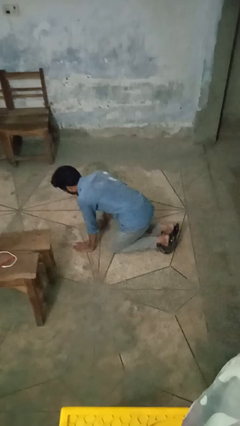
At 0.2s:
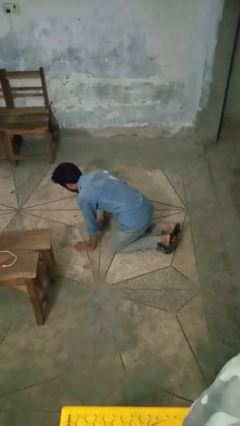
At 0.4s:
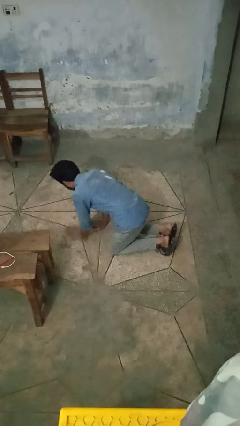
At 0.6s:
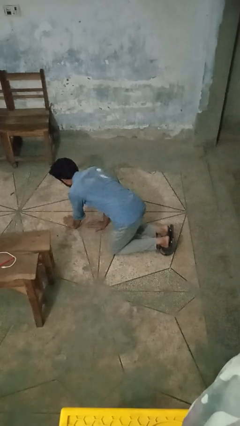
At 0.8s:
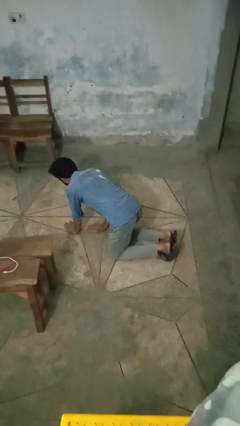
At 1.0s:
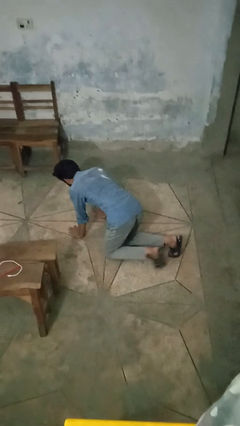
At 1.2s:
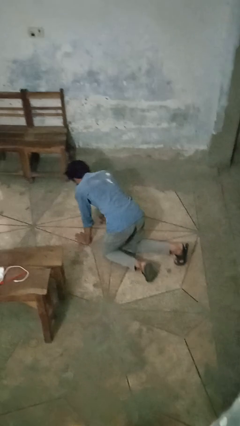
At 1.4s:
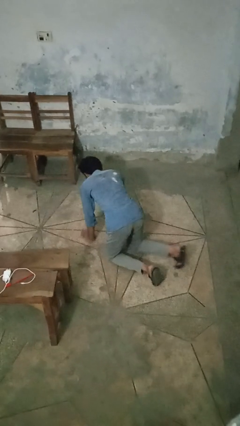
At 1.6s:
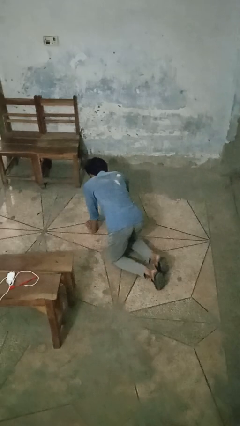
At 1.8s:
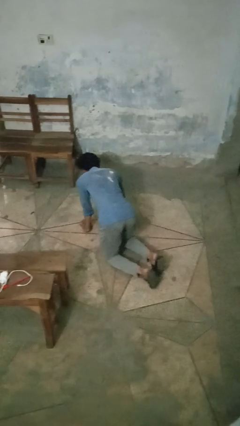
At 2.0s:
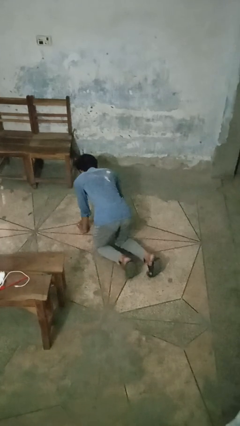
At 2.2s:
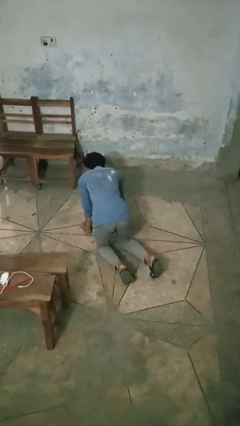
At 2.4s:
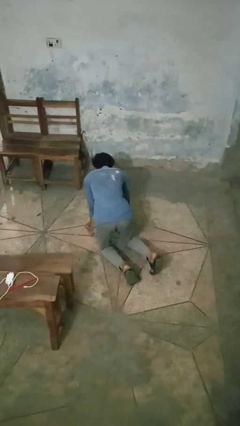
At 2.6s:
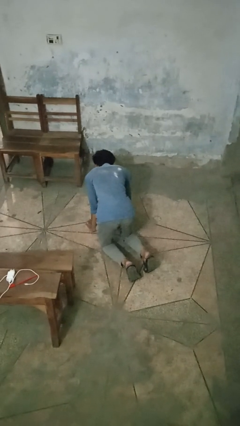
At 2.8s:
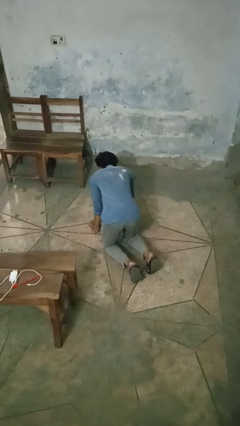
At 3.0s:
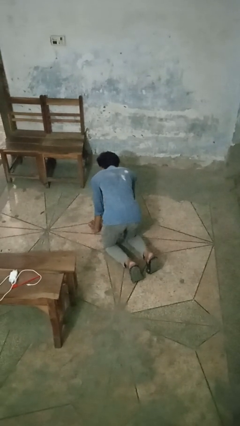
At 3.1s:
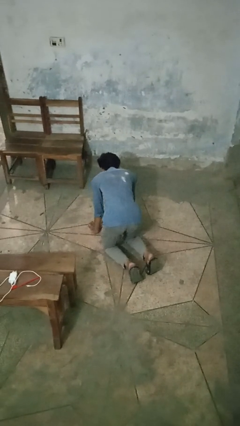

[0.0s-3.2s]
person crawls

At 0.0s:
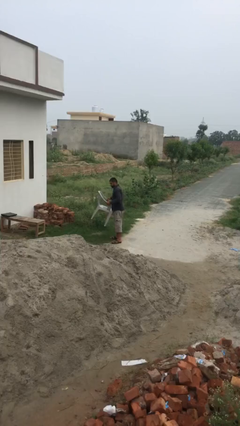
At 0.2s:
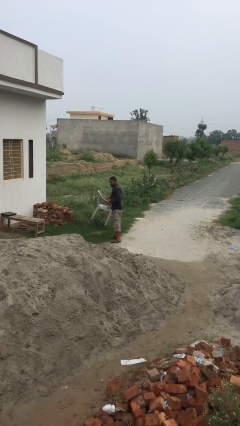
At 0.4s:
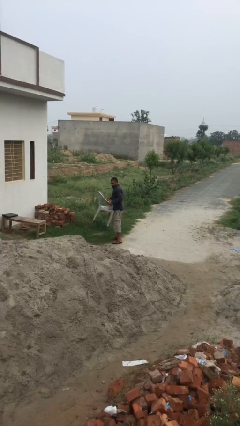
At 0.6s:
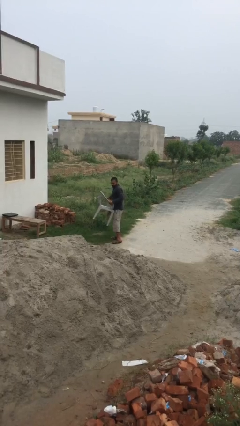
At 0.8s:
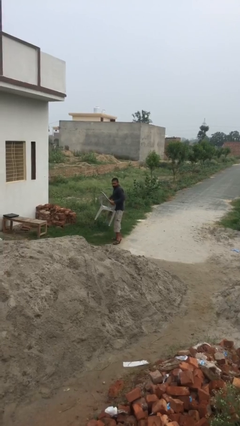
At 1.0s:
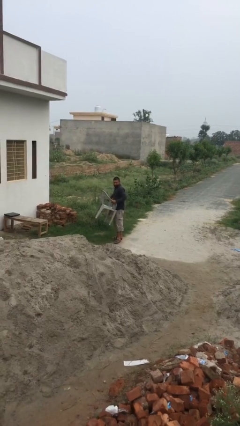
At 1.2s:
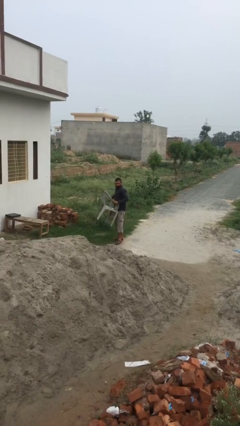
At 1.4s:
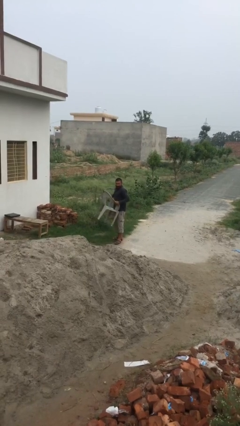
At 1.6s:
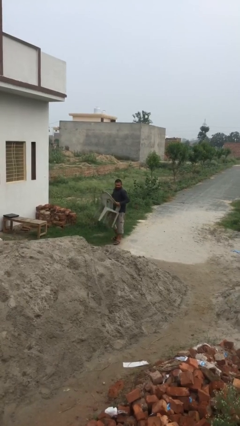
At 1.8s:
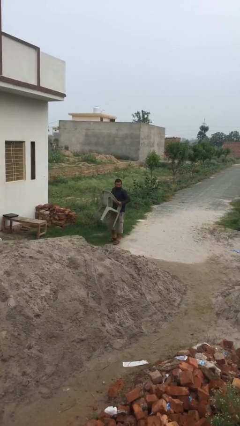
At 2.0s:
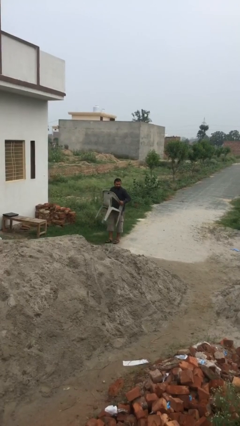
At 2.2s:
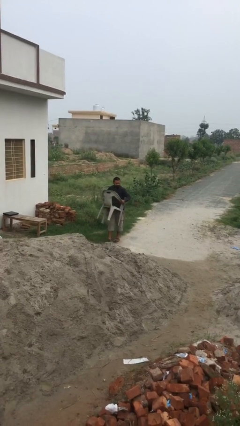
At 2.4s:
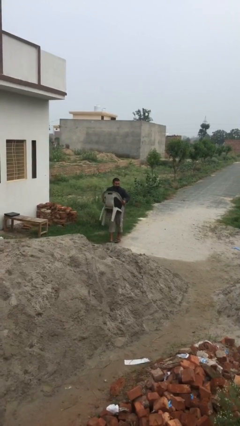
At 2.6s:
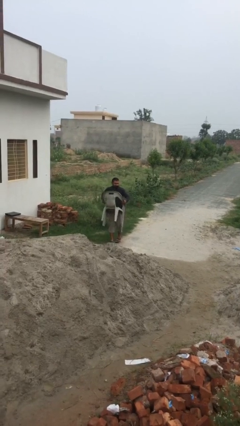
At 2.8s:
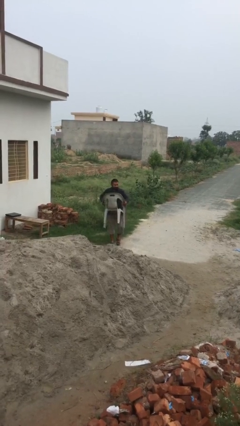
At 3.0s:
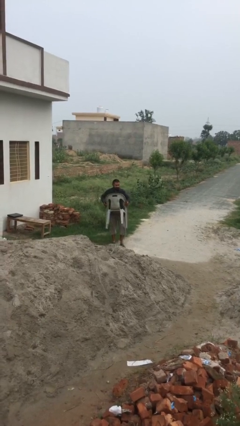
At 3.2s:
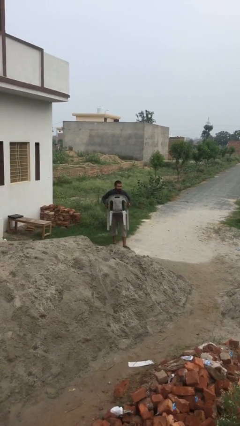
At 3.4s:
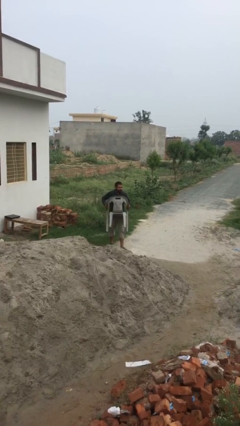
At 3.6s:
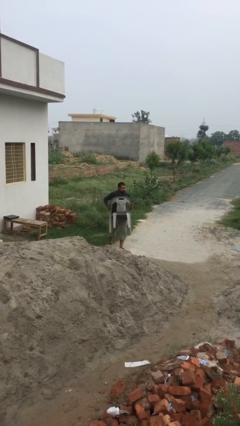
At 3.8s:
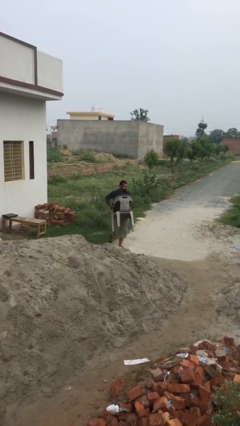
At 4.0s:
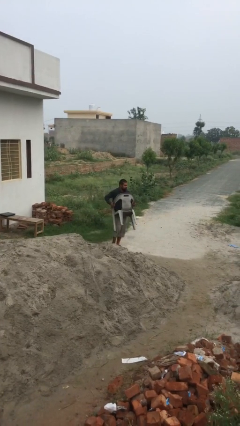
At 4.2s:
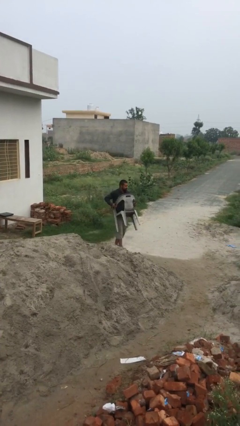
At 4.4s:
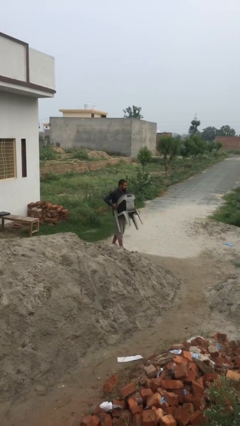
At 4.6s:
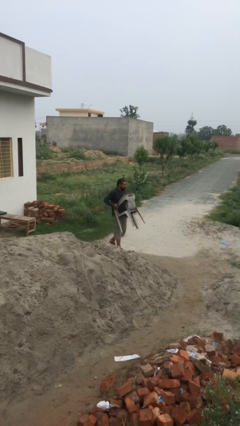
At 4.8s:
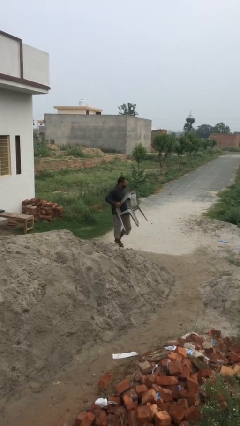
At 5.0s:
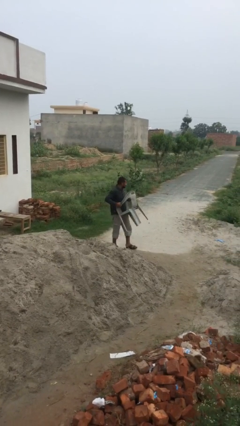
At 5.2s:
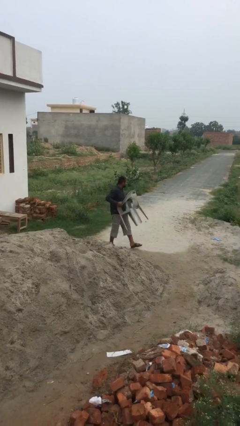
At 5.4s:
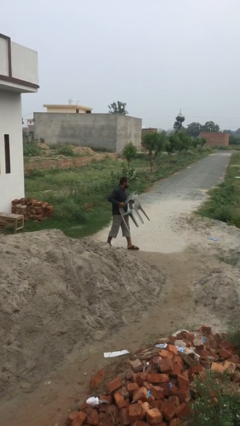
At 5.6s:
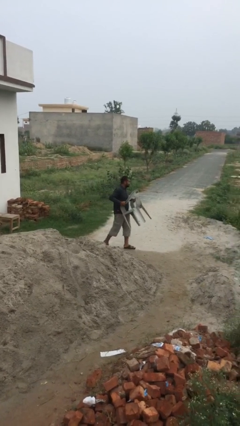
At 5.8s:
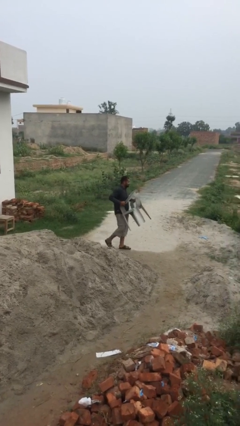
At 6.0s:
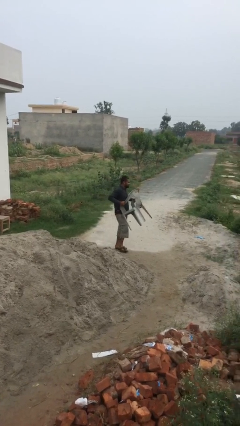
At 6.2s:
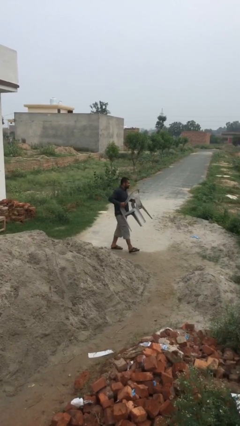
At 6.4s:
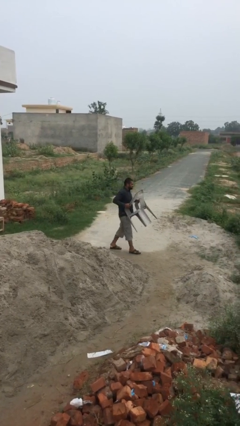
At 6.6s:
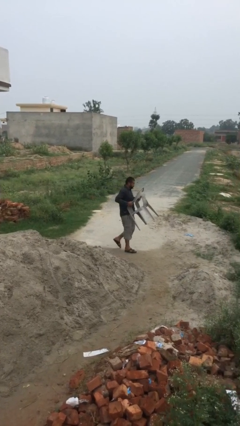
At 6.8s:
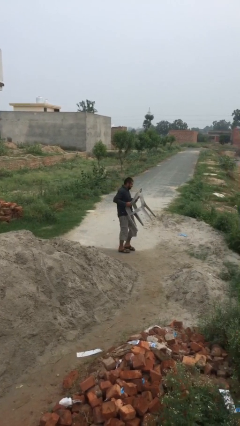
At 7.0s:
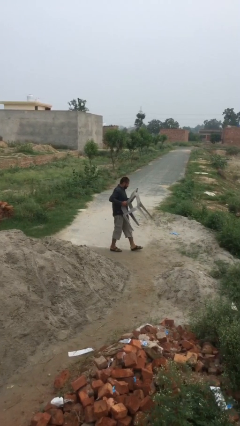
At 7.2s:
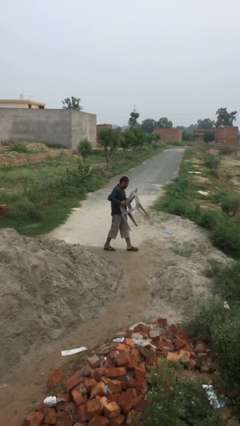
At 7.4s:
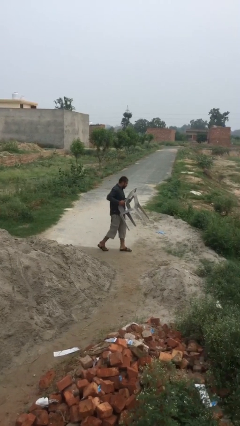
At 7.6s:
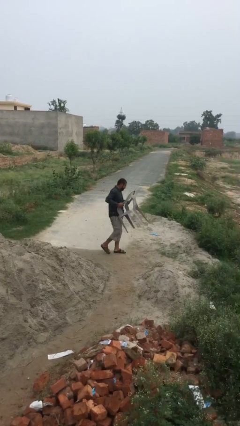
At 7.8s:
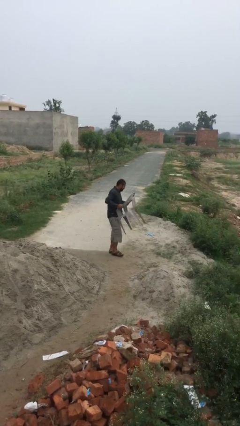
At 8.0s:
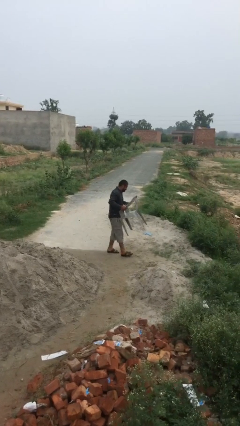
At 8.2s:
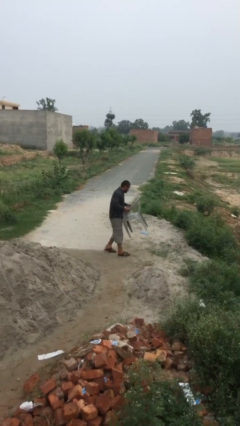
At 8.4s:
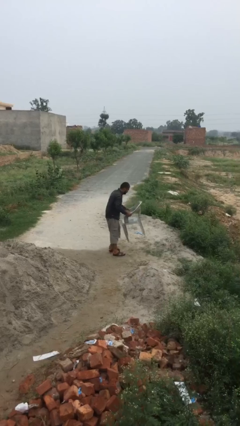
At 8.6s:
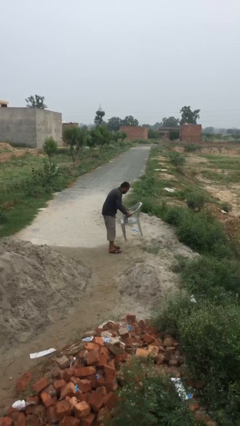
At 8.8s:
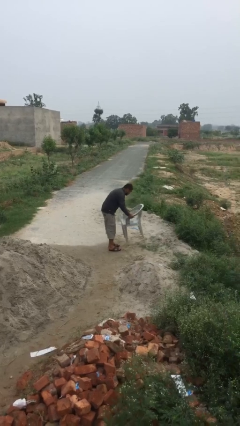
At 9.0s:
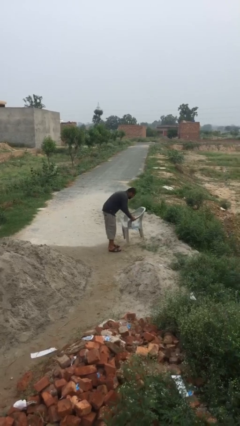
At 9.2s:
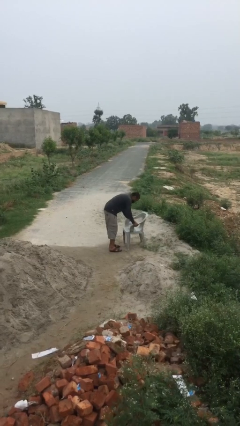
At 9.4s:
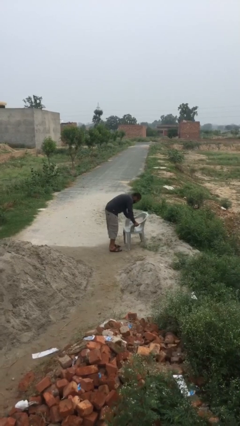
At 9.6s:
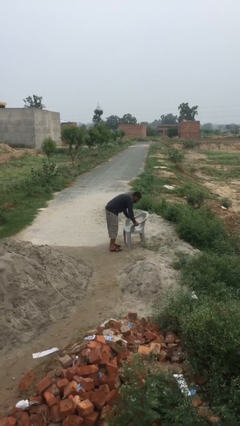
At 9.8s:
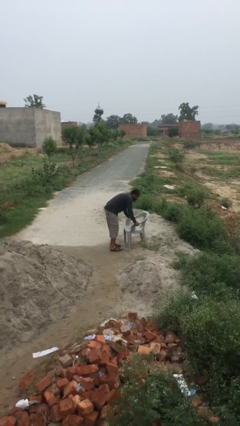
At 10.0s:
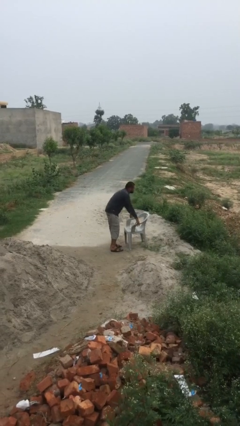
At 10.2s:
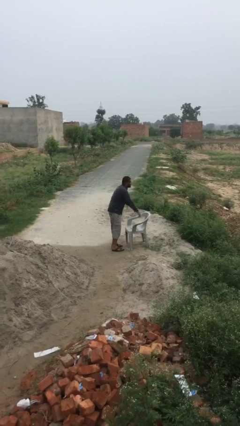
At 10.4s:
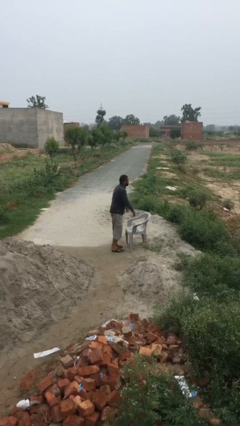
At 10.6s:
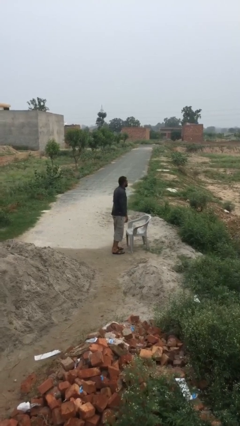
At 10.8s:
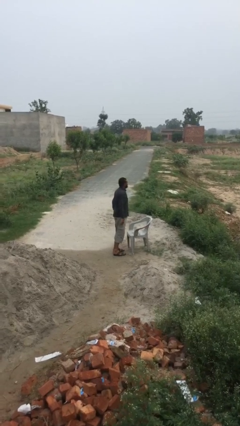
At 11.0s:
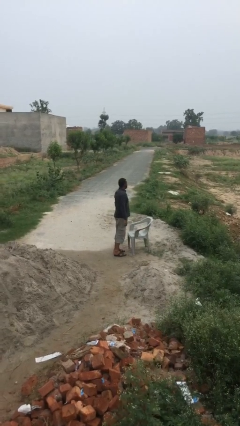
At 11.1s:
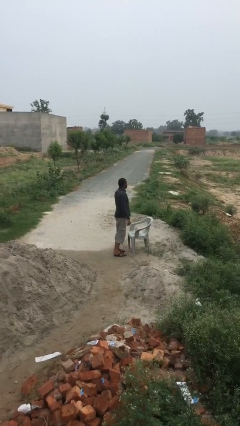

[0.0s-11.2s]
person puts down object on floor

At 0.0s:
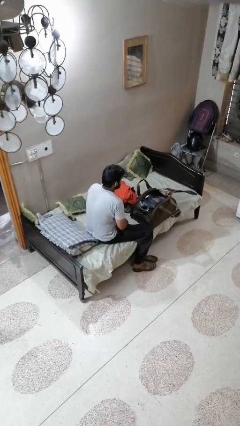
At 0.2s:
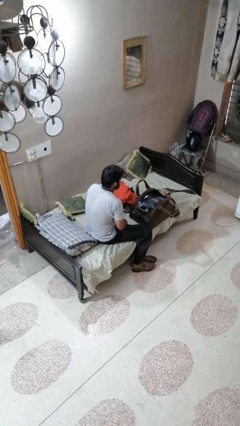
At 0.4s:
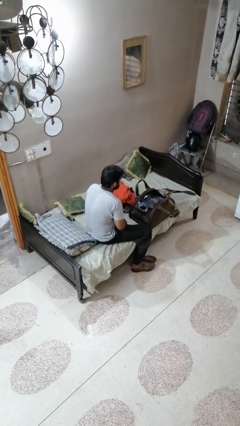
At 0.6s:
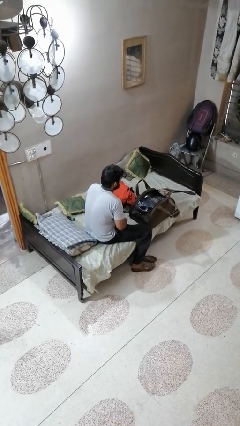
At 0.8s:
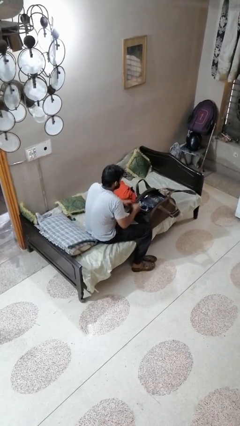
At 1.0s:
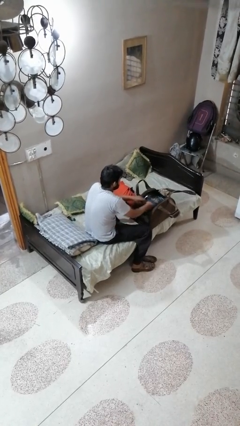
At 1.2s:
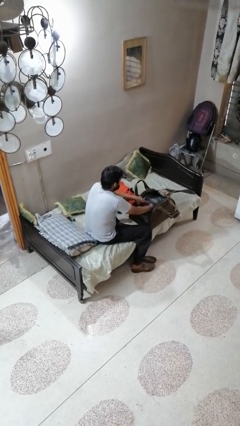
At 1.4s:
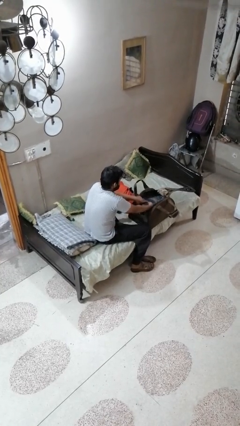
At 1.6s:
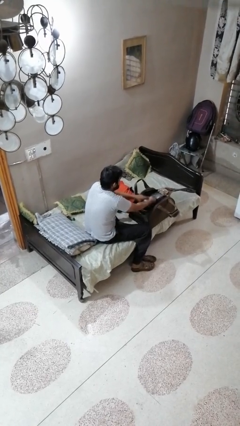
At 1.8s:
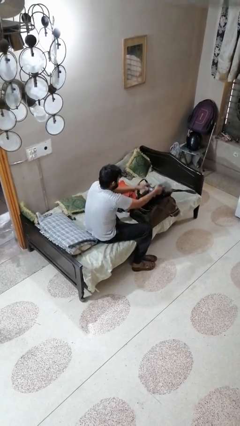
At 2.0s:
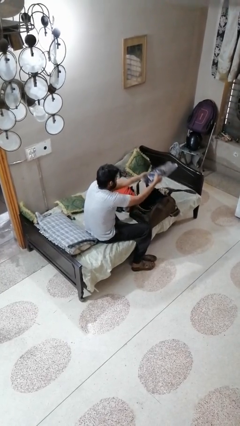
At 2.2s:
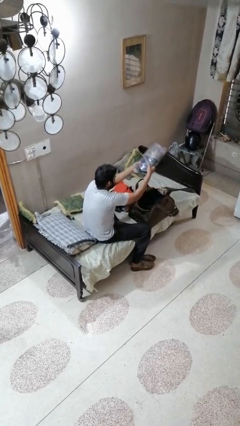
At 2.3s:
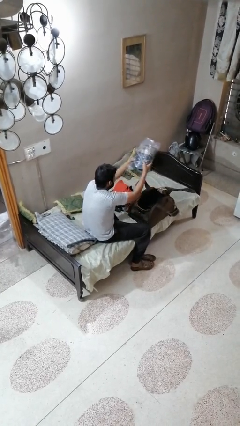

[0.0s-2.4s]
person unloads clothes from suitcase

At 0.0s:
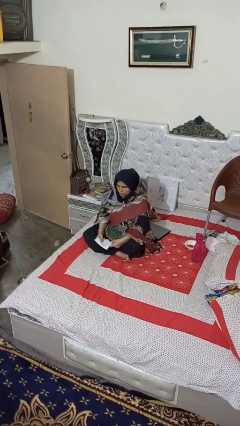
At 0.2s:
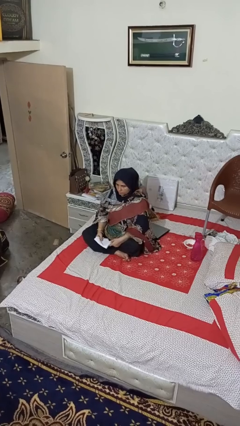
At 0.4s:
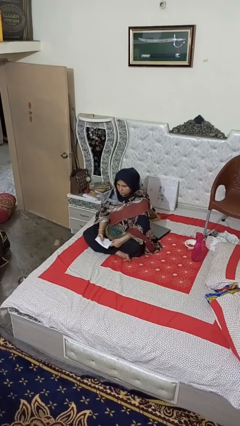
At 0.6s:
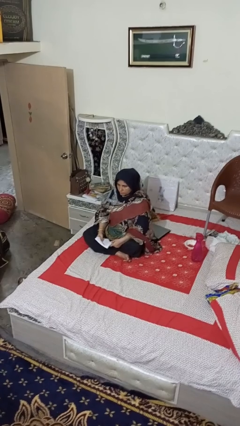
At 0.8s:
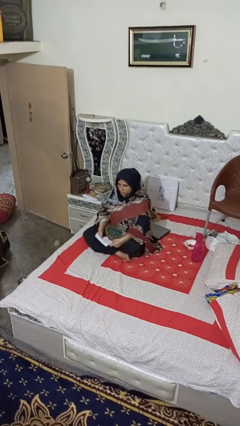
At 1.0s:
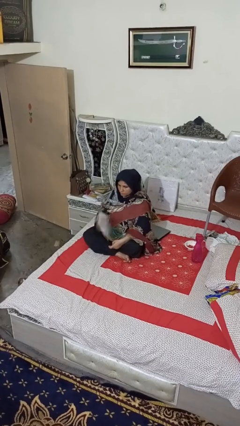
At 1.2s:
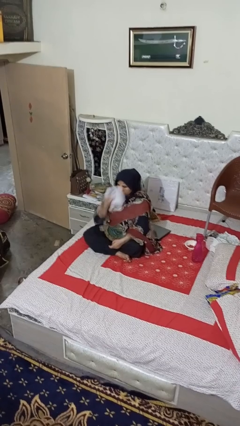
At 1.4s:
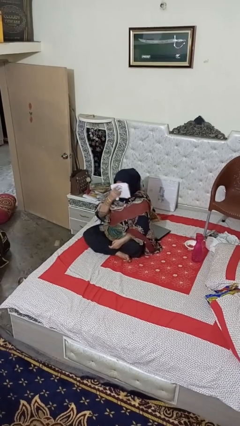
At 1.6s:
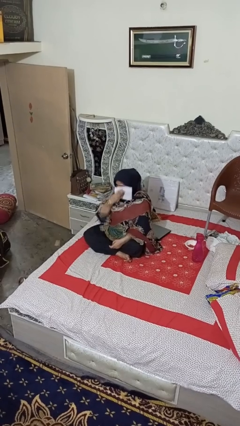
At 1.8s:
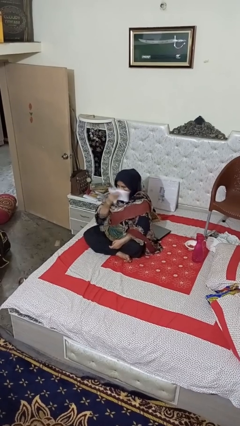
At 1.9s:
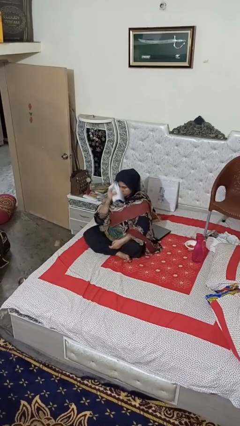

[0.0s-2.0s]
person wipes mouth with napkin
